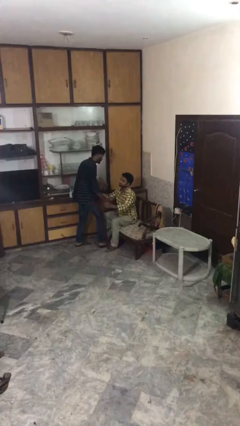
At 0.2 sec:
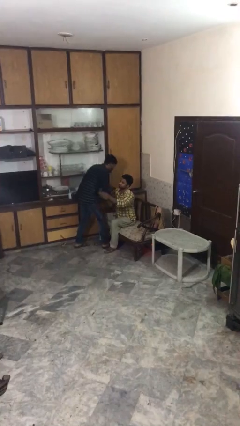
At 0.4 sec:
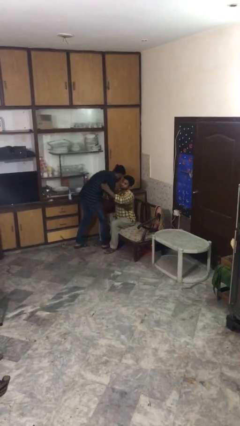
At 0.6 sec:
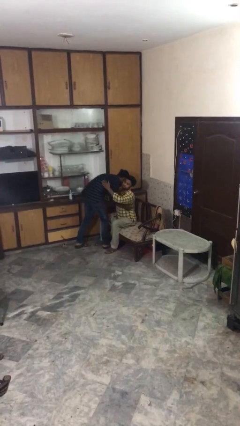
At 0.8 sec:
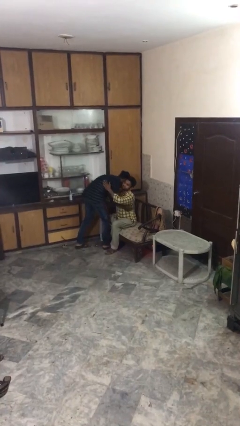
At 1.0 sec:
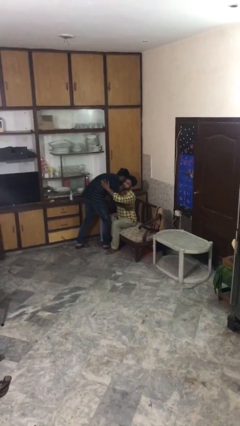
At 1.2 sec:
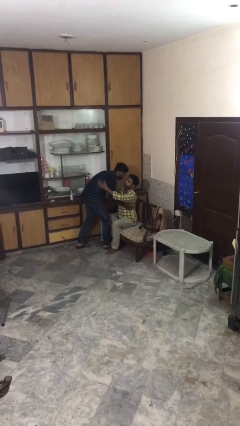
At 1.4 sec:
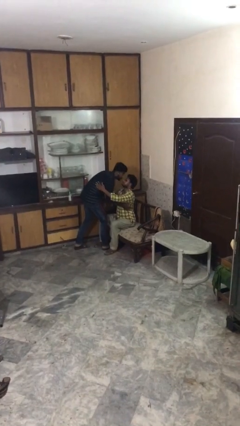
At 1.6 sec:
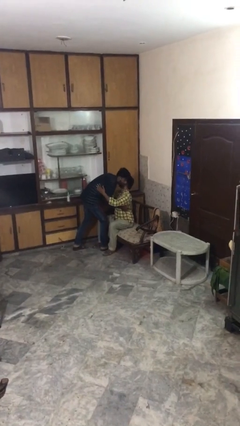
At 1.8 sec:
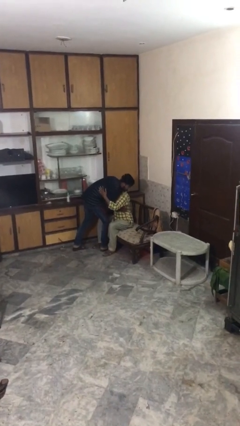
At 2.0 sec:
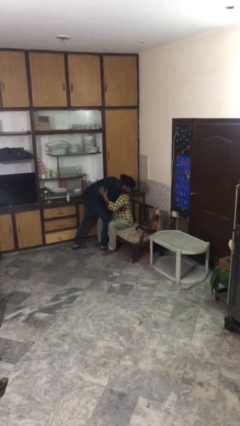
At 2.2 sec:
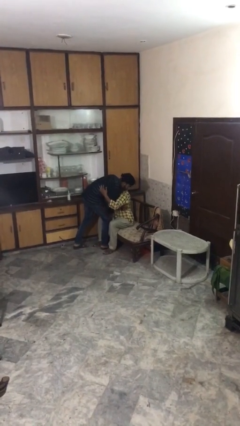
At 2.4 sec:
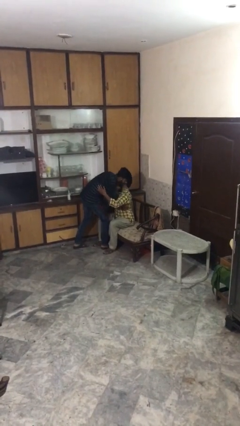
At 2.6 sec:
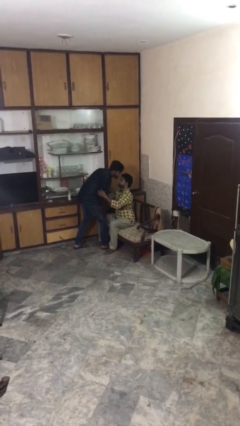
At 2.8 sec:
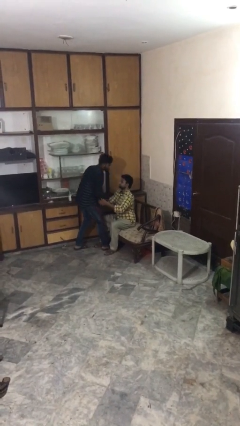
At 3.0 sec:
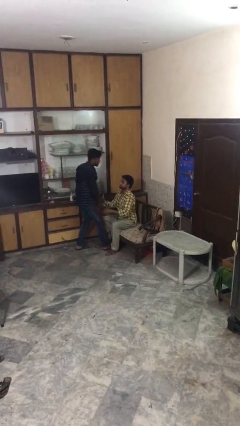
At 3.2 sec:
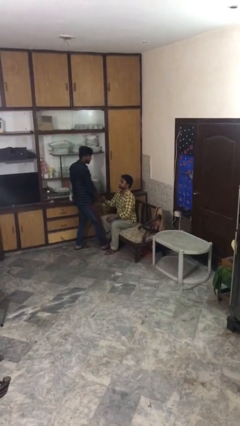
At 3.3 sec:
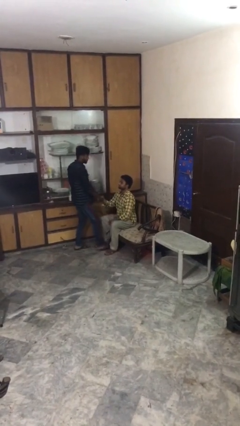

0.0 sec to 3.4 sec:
person embraces person

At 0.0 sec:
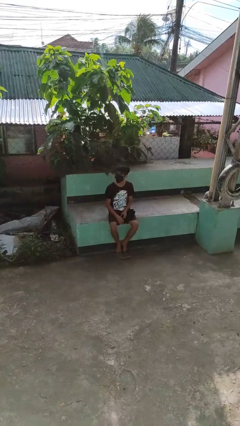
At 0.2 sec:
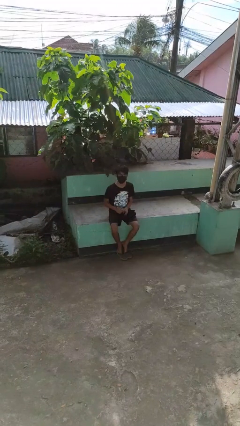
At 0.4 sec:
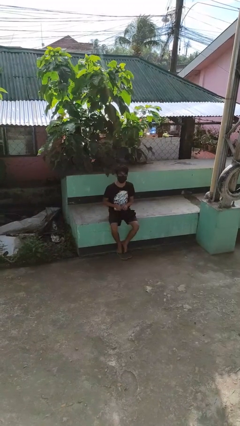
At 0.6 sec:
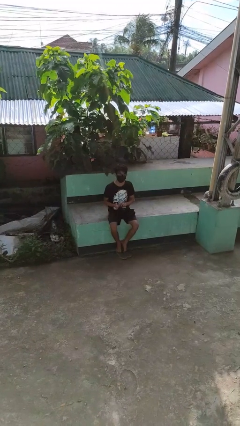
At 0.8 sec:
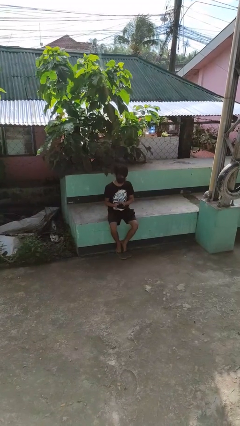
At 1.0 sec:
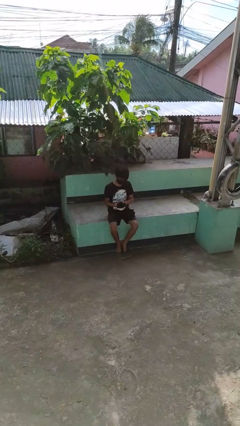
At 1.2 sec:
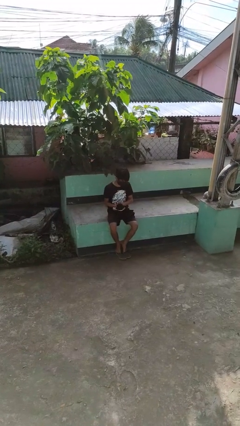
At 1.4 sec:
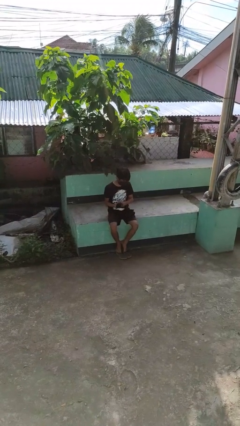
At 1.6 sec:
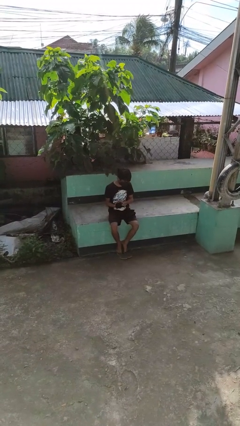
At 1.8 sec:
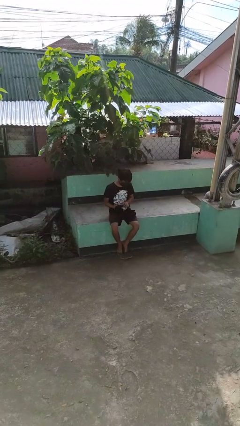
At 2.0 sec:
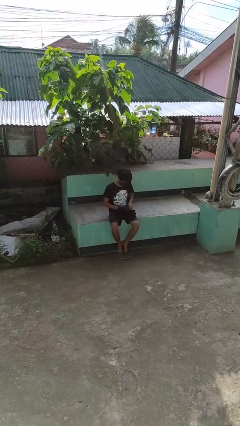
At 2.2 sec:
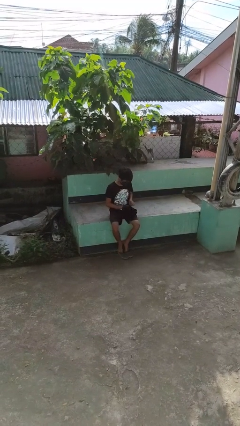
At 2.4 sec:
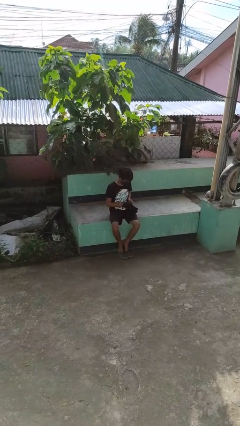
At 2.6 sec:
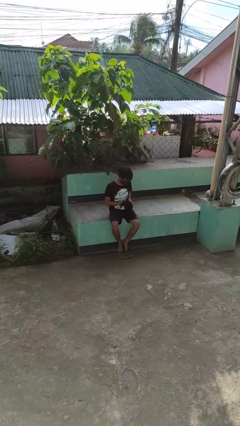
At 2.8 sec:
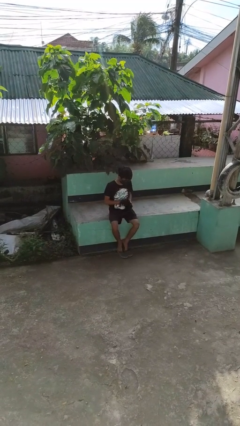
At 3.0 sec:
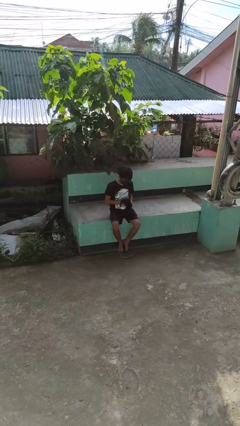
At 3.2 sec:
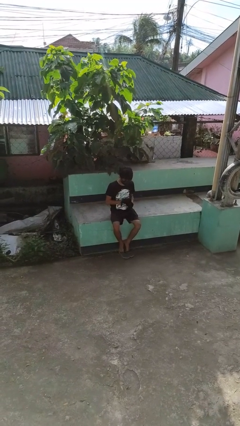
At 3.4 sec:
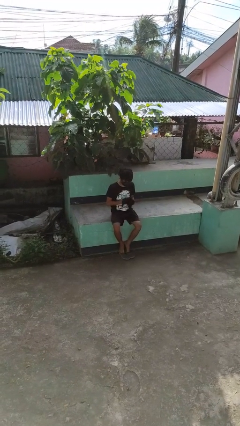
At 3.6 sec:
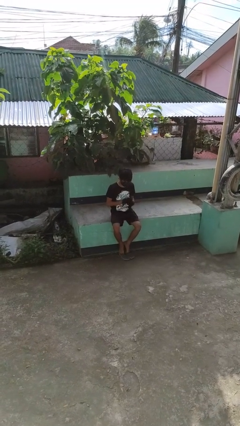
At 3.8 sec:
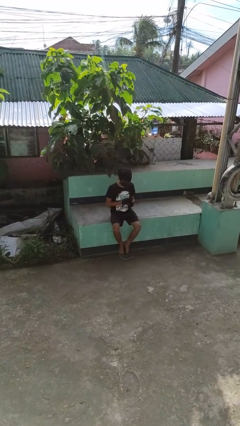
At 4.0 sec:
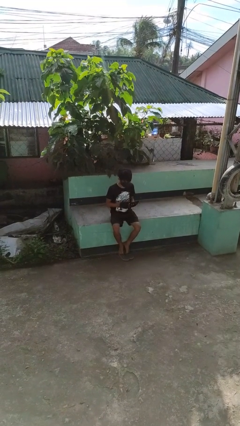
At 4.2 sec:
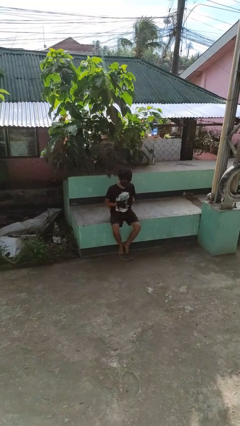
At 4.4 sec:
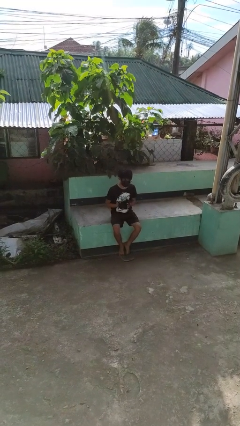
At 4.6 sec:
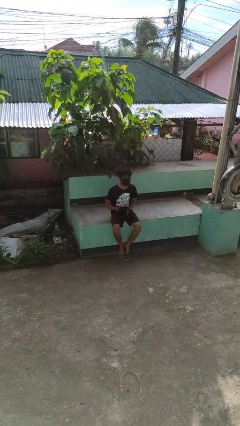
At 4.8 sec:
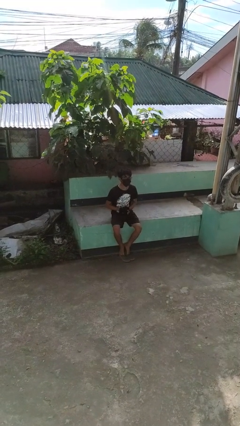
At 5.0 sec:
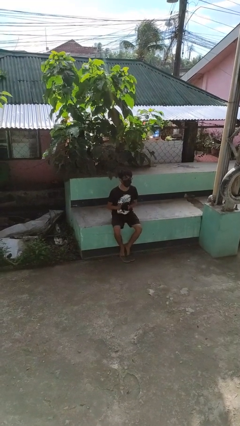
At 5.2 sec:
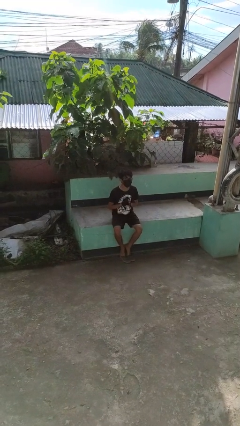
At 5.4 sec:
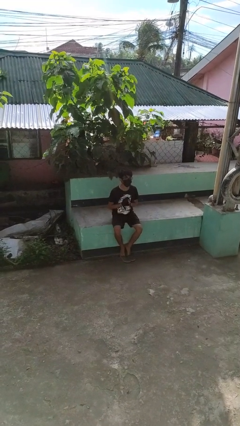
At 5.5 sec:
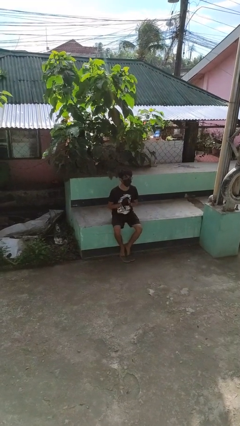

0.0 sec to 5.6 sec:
person puts on gloves

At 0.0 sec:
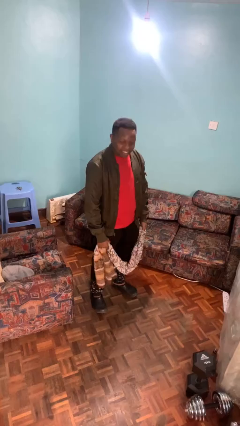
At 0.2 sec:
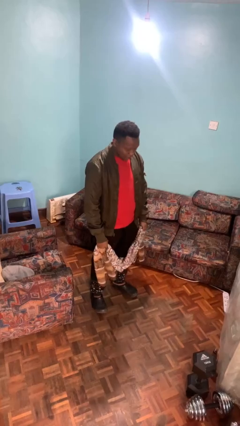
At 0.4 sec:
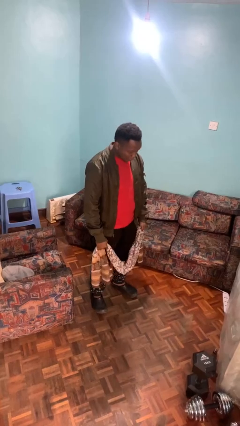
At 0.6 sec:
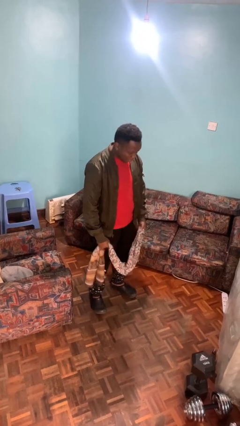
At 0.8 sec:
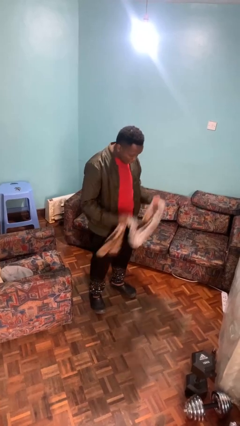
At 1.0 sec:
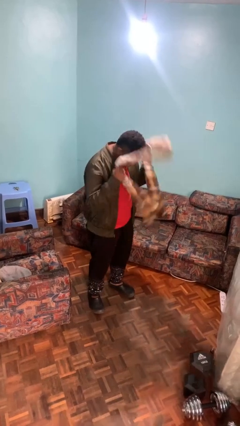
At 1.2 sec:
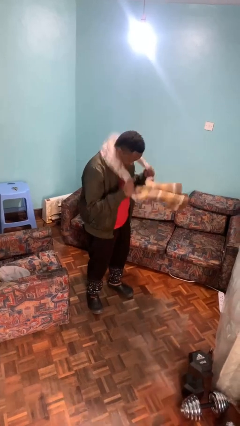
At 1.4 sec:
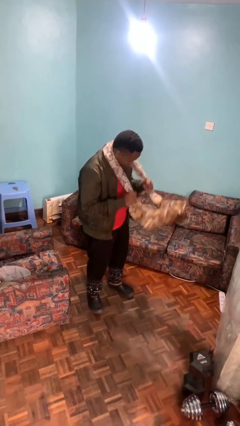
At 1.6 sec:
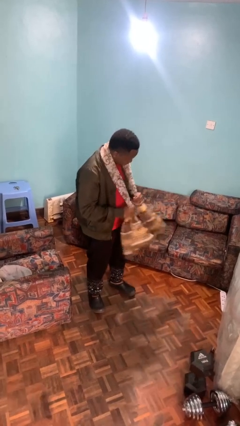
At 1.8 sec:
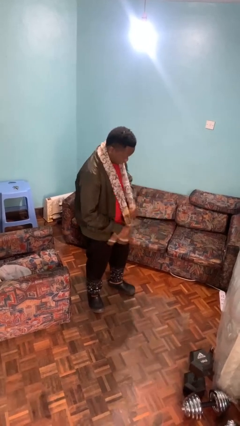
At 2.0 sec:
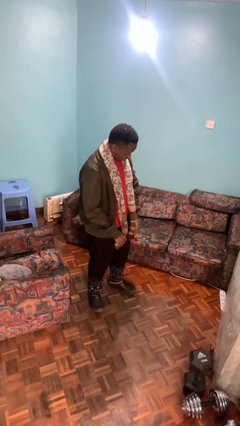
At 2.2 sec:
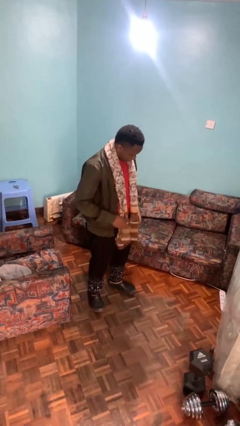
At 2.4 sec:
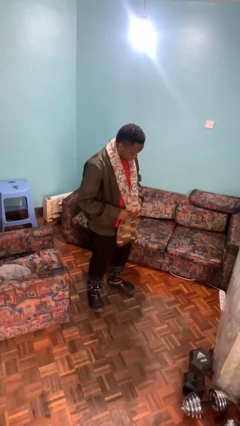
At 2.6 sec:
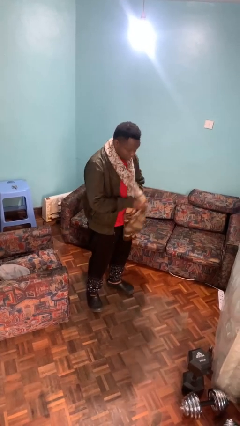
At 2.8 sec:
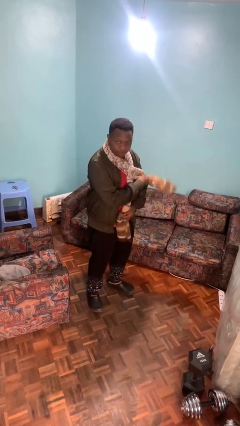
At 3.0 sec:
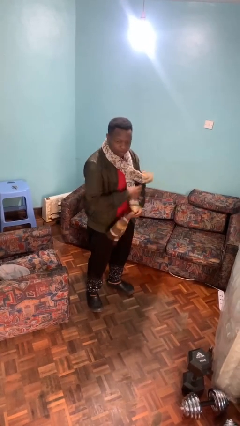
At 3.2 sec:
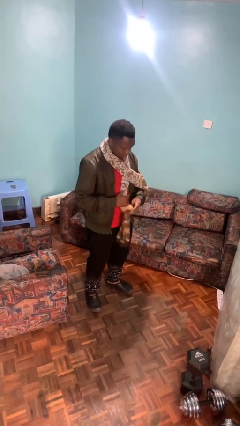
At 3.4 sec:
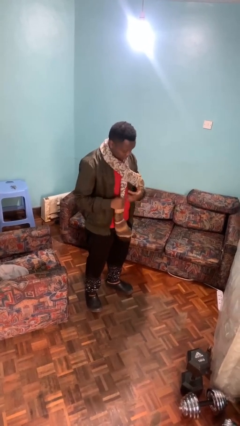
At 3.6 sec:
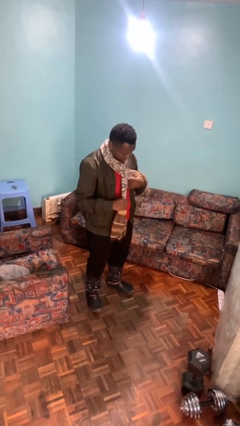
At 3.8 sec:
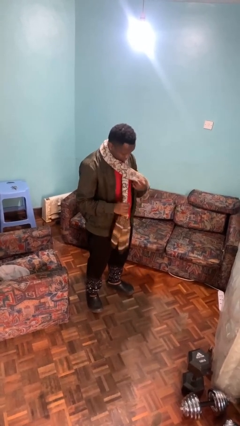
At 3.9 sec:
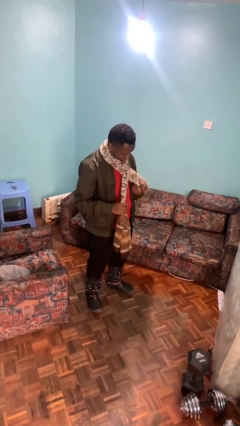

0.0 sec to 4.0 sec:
person puts on scarf

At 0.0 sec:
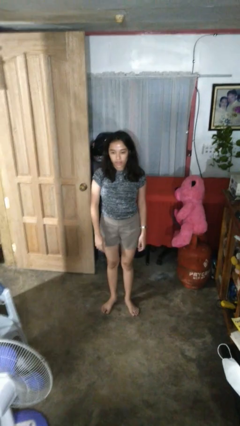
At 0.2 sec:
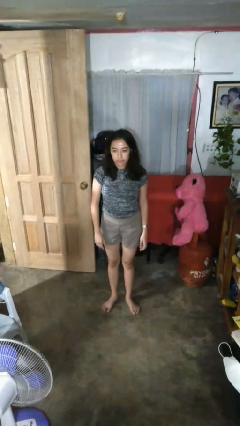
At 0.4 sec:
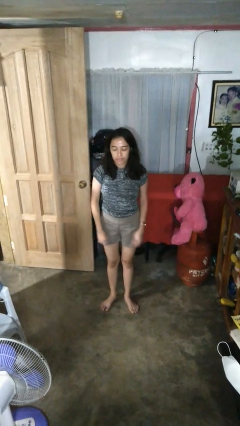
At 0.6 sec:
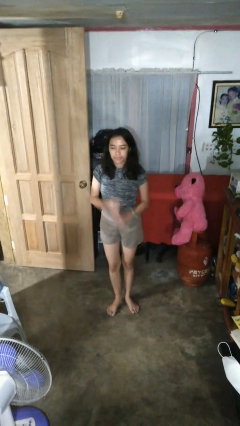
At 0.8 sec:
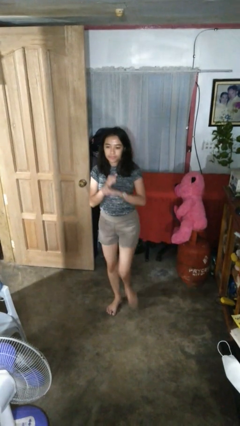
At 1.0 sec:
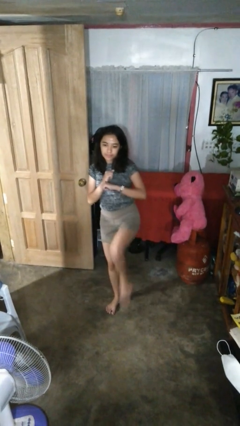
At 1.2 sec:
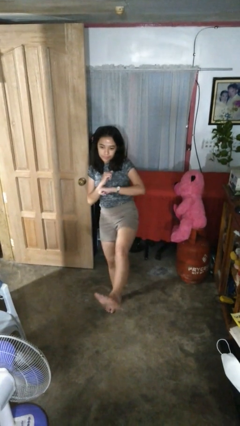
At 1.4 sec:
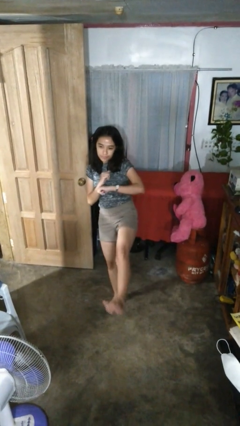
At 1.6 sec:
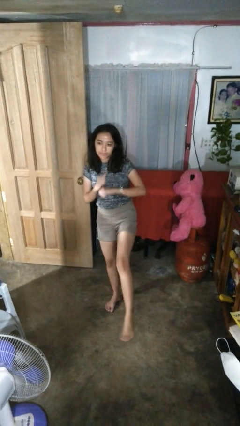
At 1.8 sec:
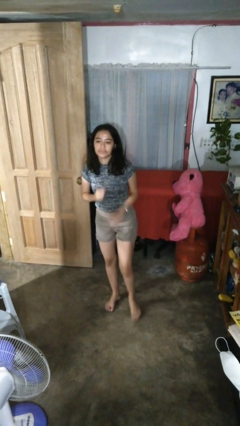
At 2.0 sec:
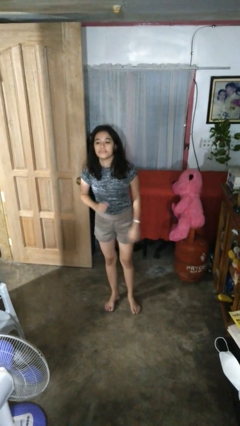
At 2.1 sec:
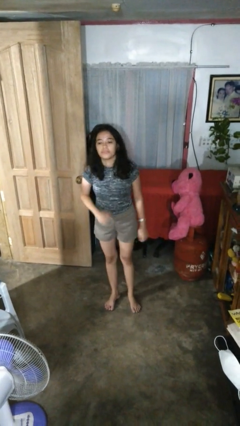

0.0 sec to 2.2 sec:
person karate kicks

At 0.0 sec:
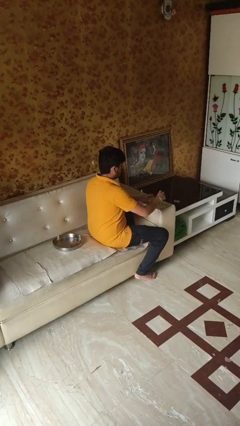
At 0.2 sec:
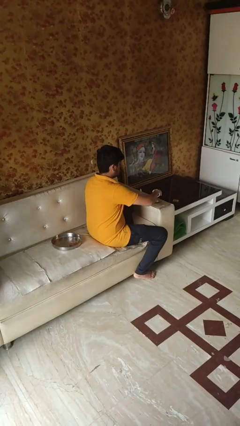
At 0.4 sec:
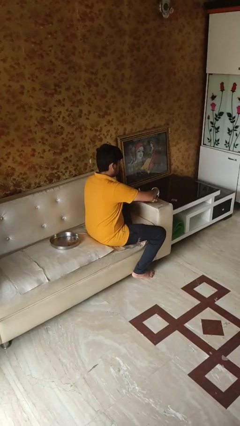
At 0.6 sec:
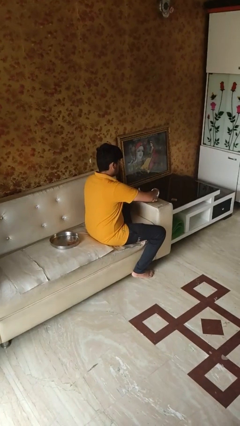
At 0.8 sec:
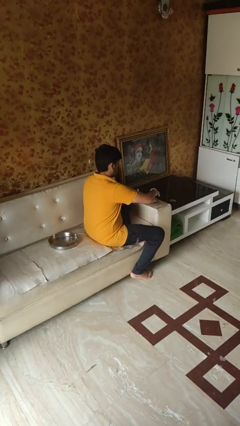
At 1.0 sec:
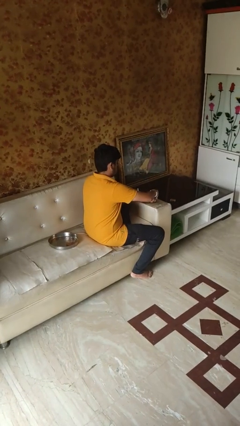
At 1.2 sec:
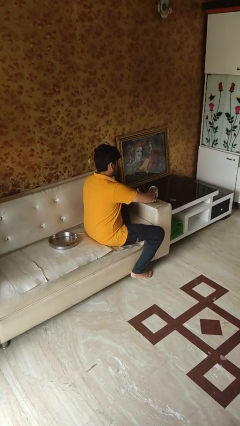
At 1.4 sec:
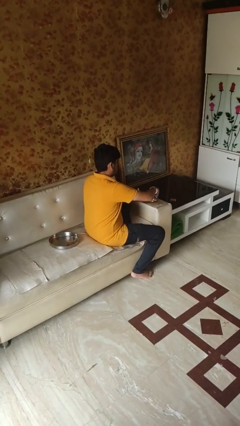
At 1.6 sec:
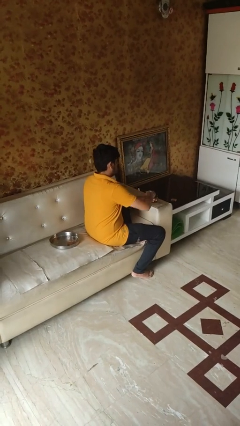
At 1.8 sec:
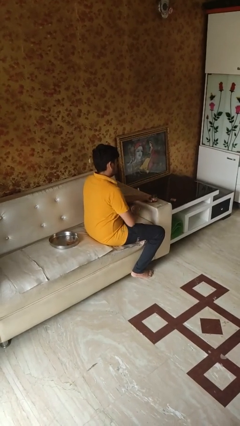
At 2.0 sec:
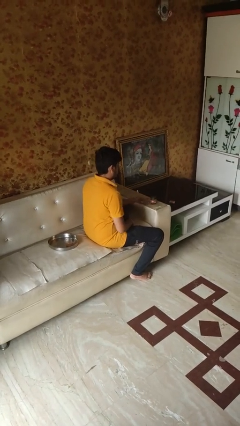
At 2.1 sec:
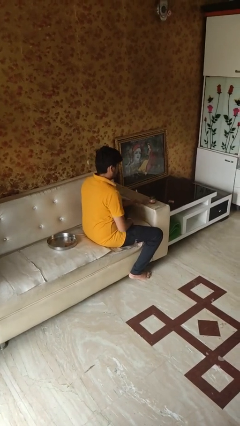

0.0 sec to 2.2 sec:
person closes jar
